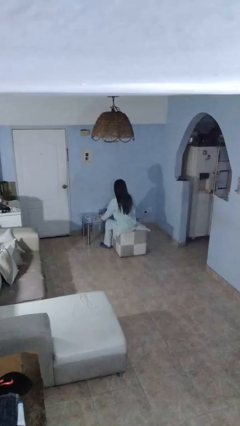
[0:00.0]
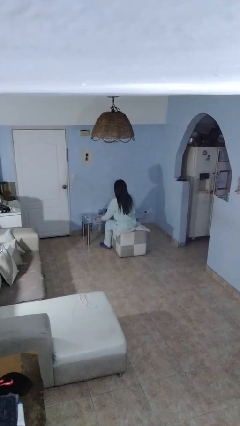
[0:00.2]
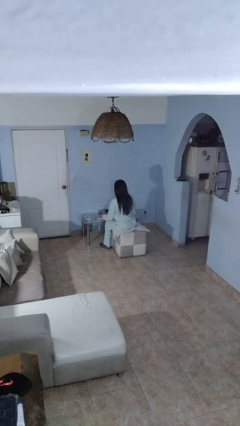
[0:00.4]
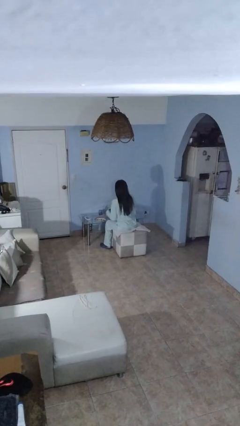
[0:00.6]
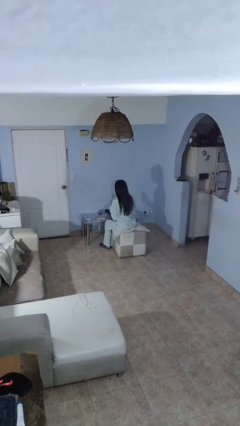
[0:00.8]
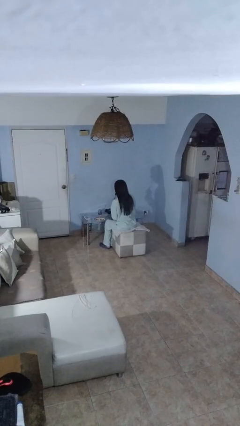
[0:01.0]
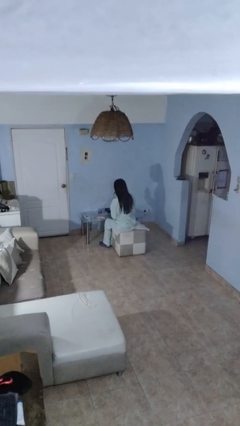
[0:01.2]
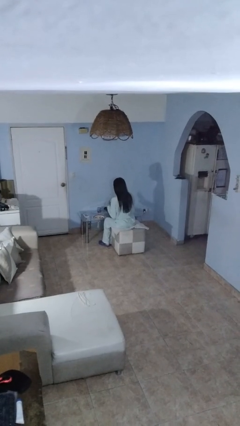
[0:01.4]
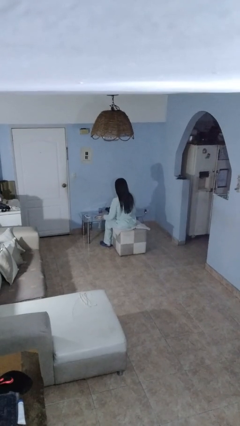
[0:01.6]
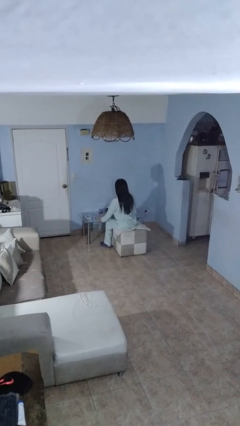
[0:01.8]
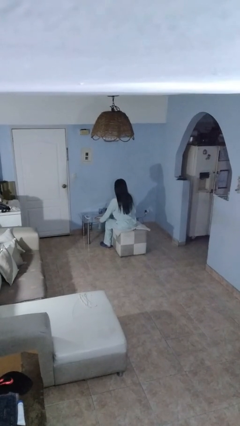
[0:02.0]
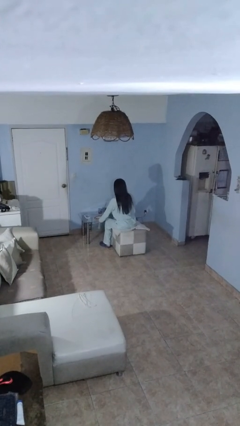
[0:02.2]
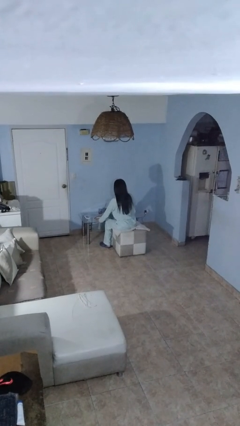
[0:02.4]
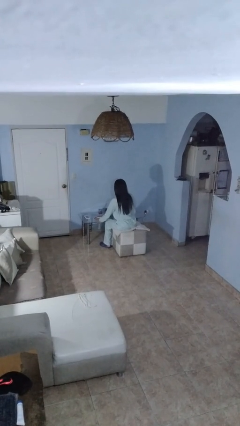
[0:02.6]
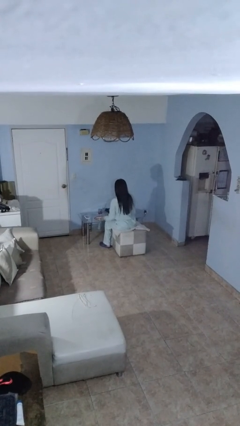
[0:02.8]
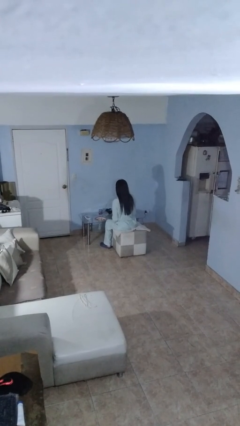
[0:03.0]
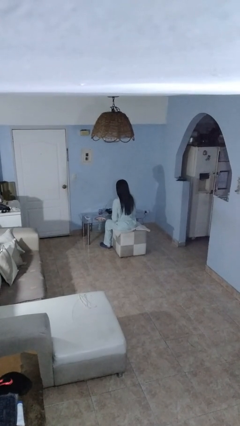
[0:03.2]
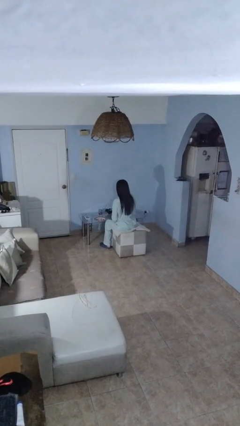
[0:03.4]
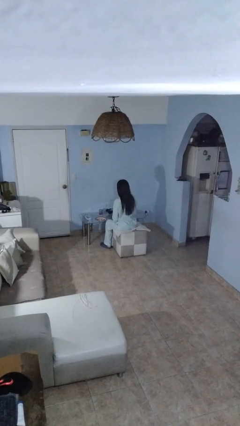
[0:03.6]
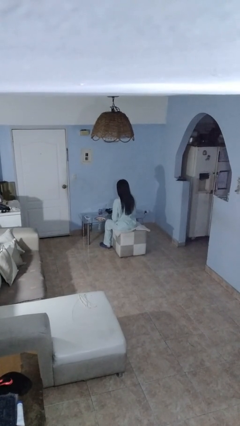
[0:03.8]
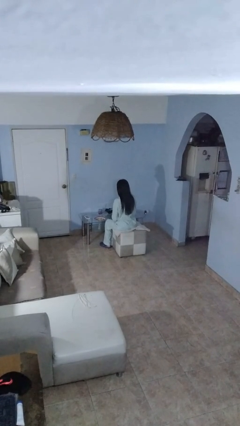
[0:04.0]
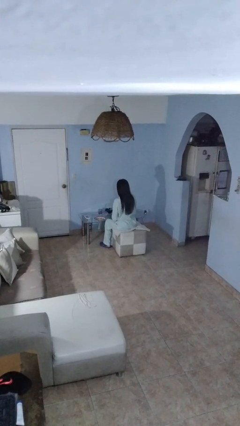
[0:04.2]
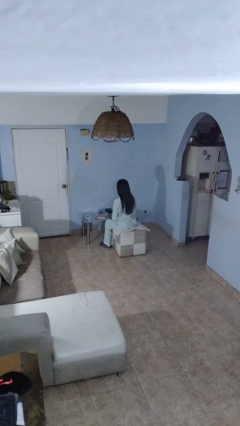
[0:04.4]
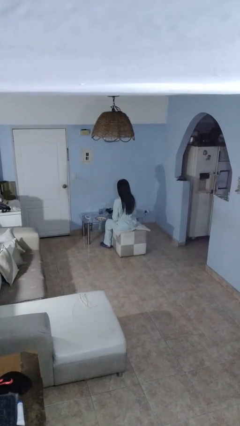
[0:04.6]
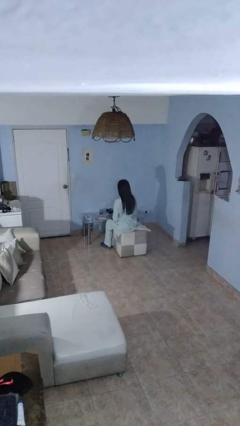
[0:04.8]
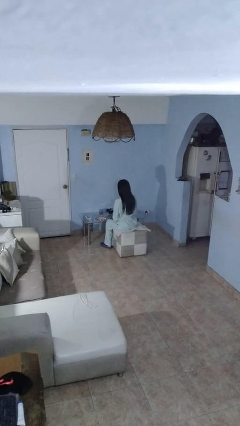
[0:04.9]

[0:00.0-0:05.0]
person turns on lamp

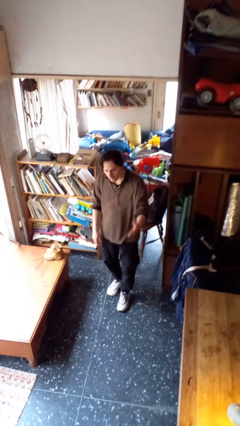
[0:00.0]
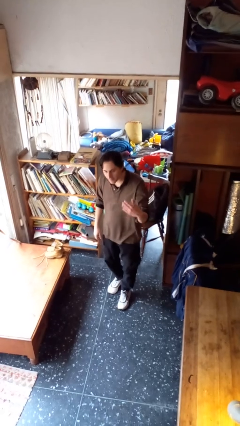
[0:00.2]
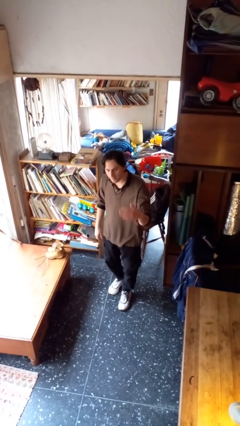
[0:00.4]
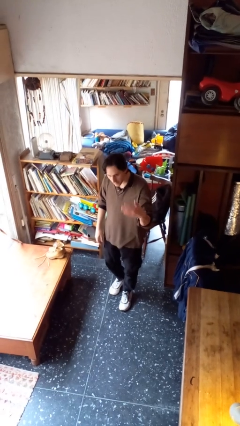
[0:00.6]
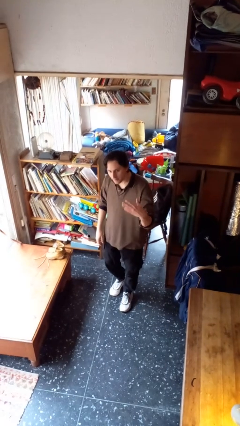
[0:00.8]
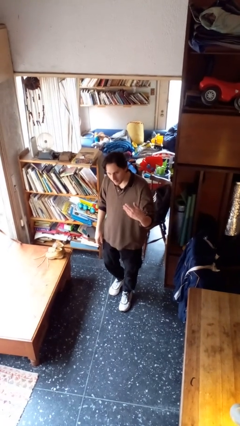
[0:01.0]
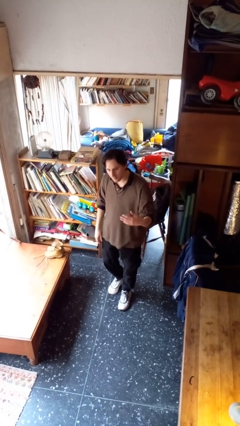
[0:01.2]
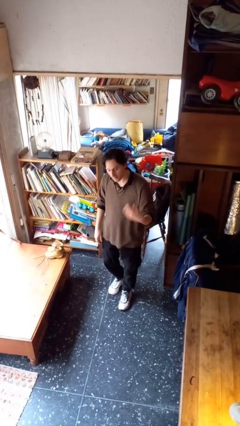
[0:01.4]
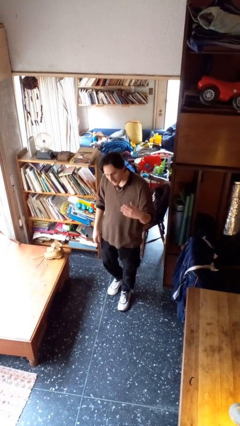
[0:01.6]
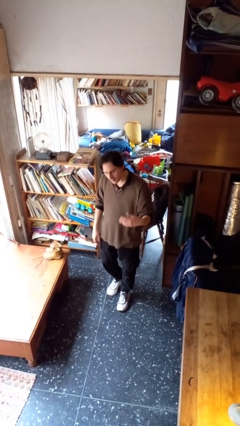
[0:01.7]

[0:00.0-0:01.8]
person gestures come here

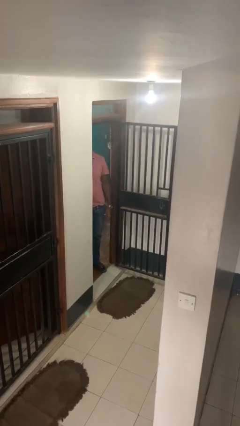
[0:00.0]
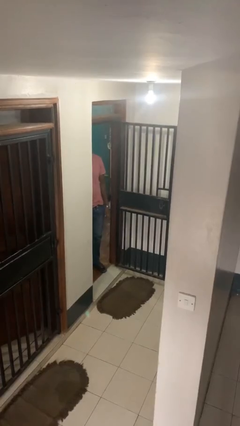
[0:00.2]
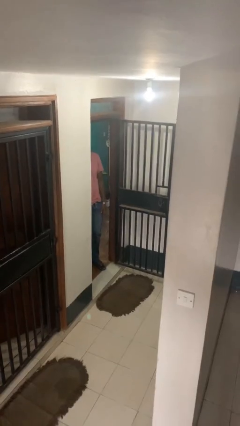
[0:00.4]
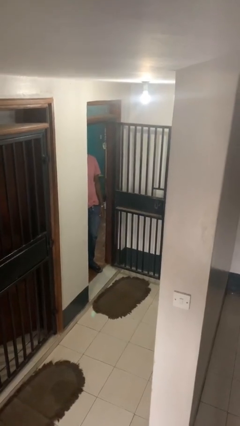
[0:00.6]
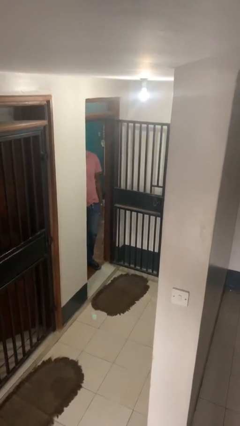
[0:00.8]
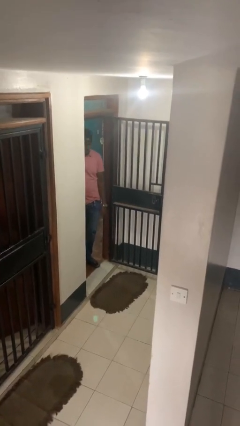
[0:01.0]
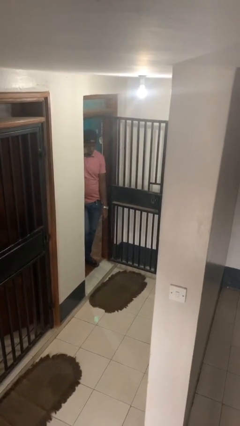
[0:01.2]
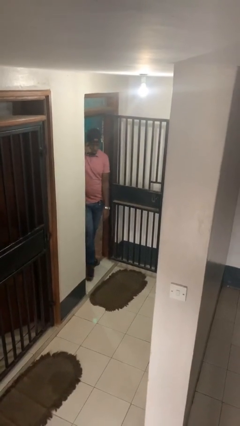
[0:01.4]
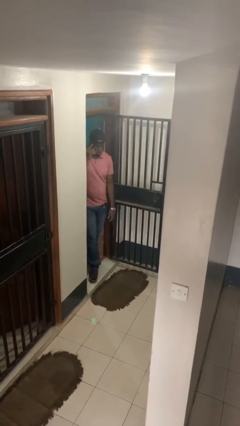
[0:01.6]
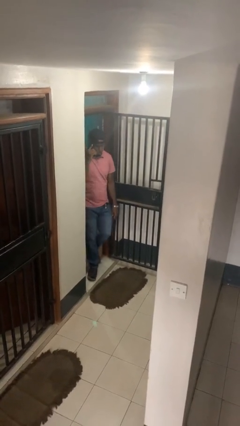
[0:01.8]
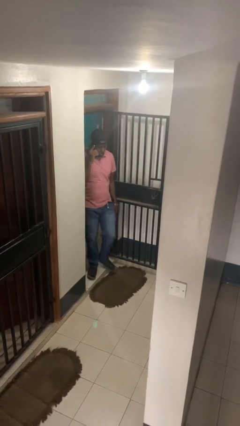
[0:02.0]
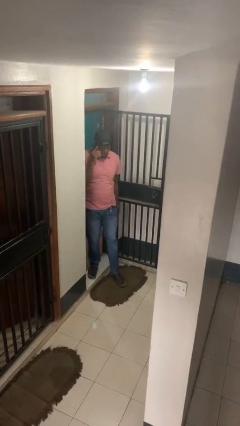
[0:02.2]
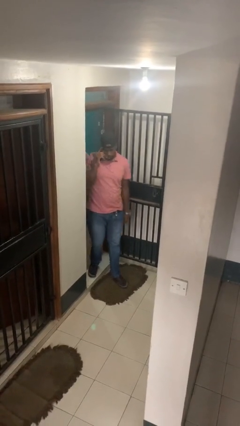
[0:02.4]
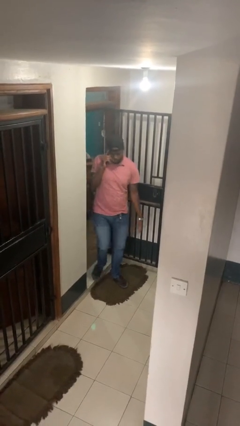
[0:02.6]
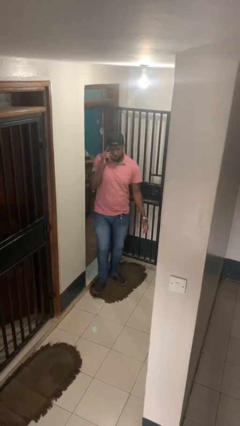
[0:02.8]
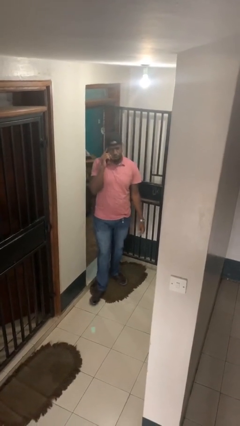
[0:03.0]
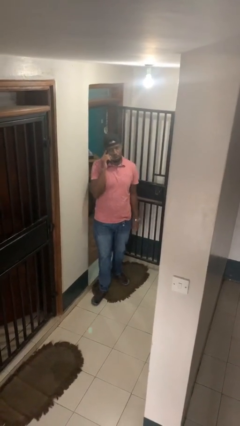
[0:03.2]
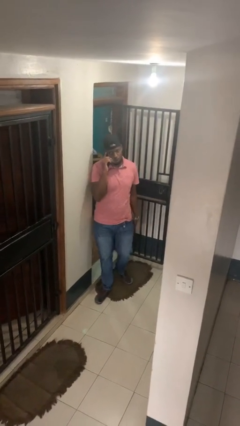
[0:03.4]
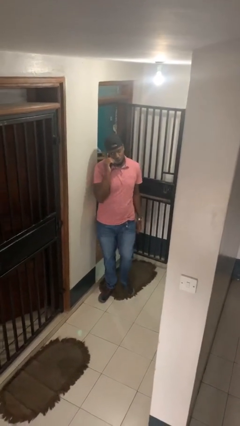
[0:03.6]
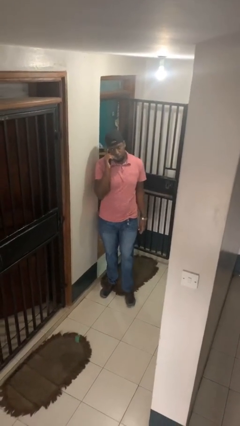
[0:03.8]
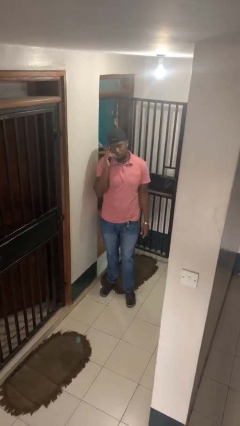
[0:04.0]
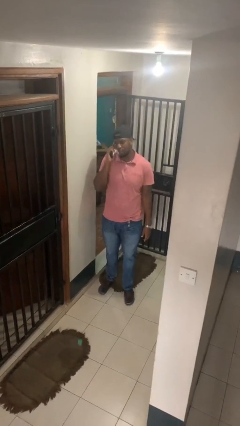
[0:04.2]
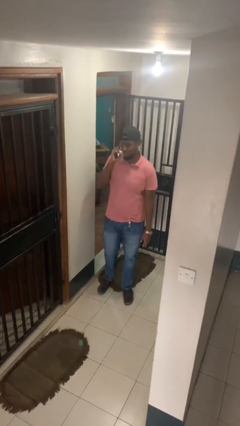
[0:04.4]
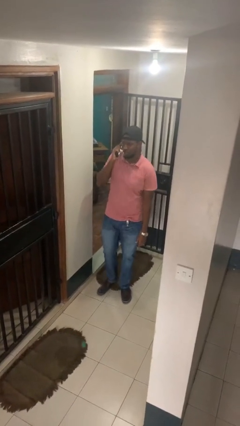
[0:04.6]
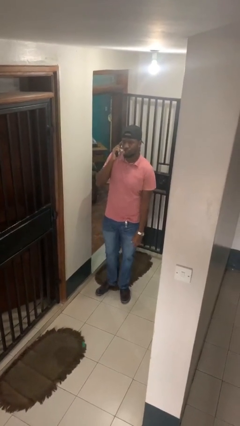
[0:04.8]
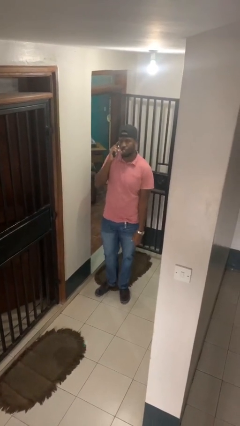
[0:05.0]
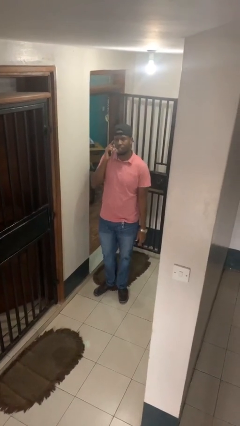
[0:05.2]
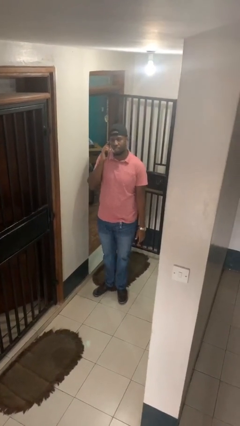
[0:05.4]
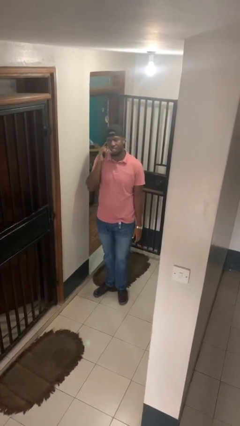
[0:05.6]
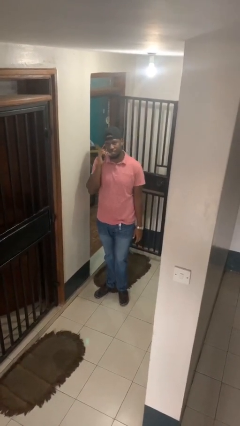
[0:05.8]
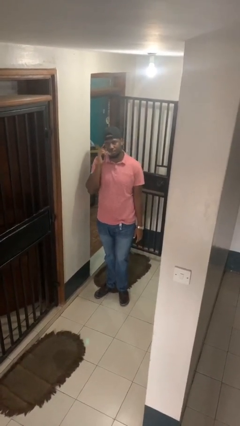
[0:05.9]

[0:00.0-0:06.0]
person enters scene through structure

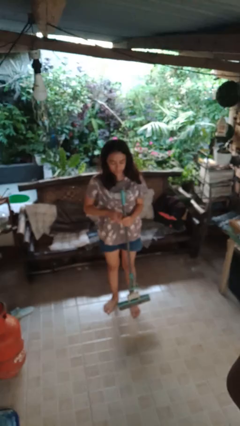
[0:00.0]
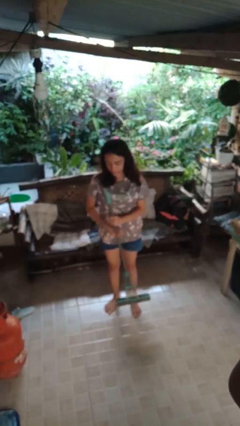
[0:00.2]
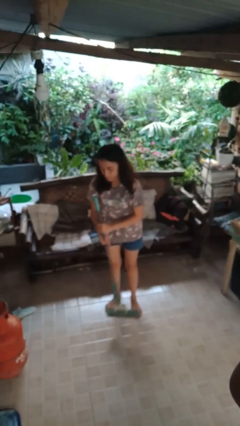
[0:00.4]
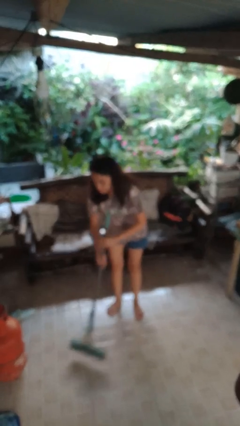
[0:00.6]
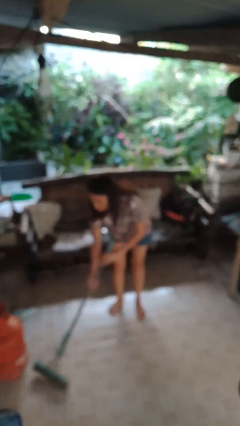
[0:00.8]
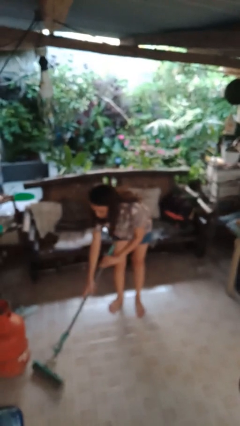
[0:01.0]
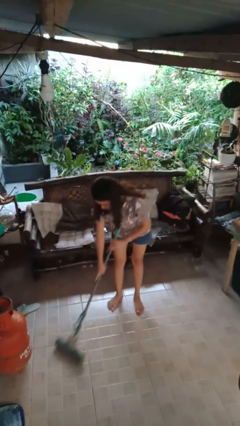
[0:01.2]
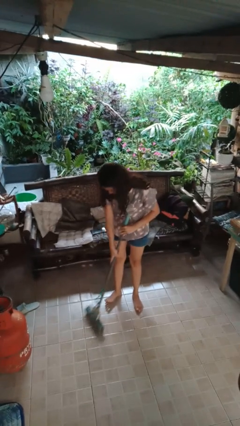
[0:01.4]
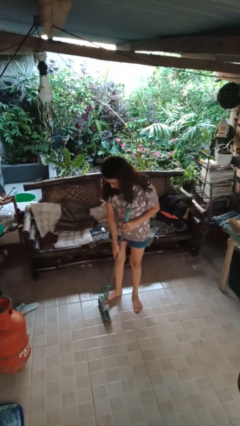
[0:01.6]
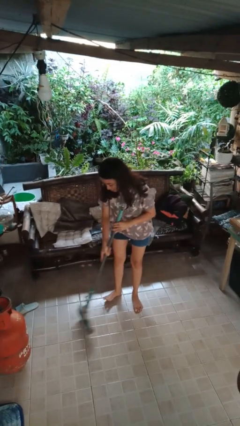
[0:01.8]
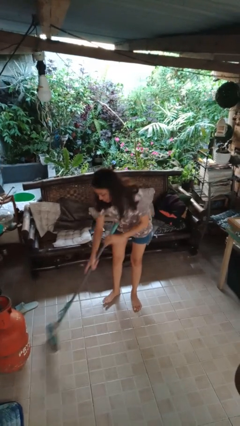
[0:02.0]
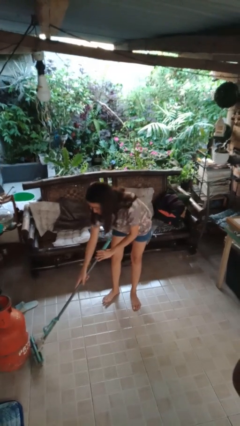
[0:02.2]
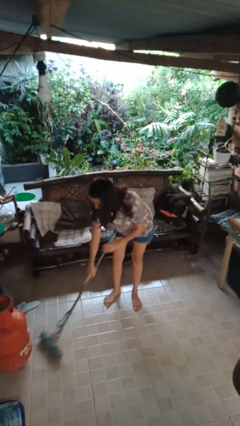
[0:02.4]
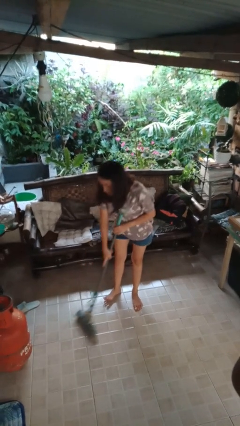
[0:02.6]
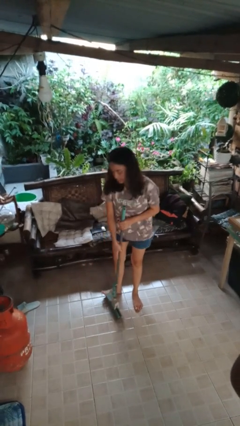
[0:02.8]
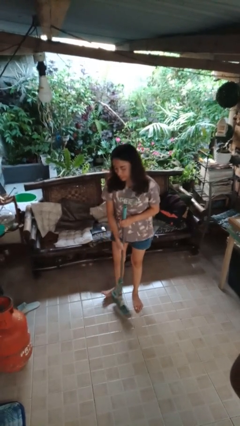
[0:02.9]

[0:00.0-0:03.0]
person mops

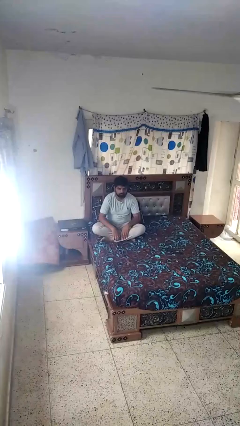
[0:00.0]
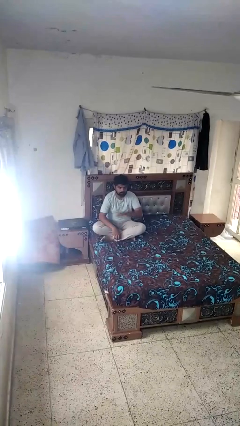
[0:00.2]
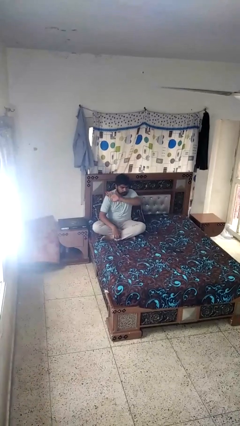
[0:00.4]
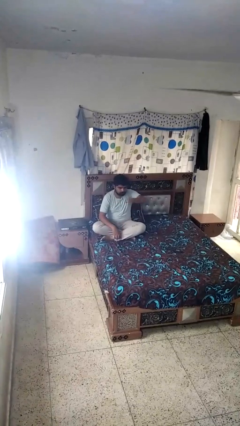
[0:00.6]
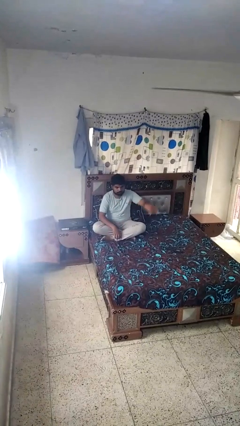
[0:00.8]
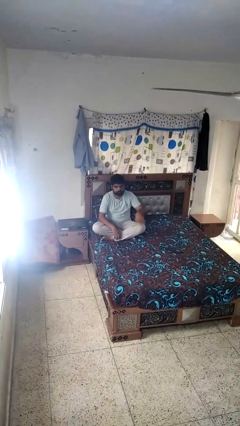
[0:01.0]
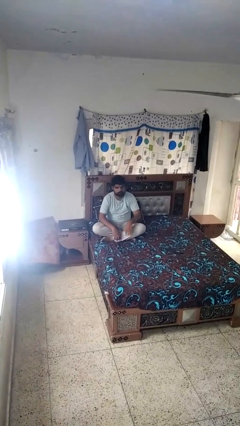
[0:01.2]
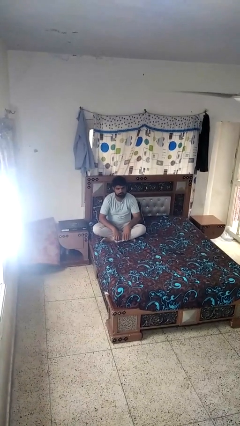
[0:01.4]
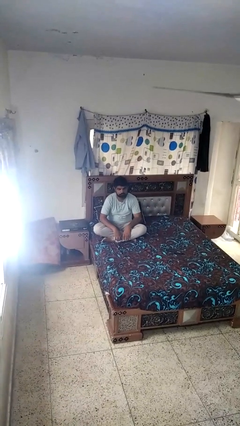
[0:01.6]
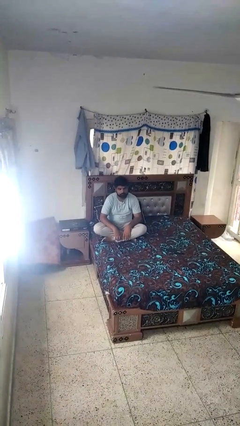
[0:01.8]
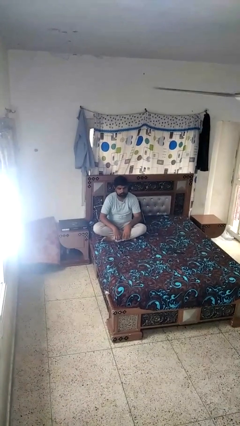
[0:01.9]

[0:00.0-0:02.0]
person gestures swipe left
